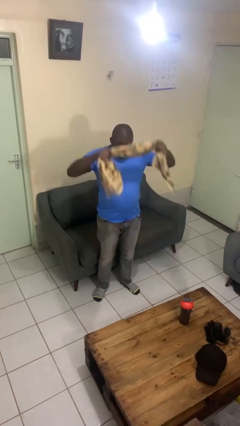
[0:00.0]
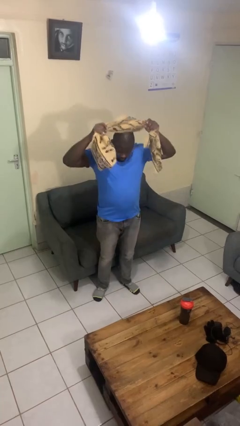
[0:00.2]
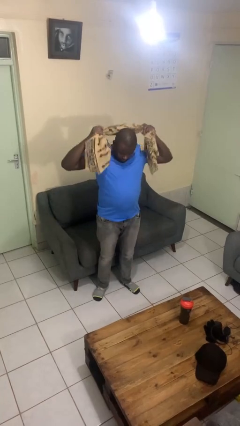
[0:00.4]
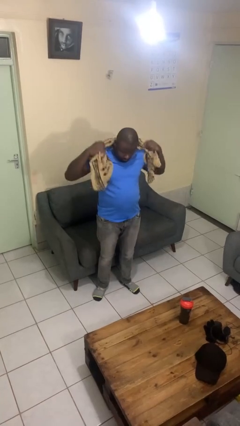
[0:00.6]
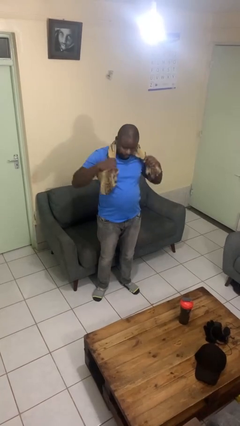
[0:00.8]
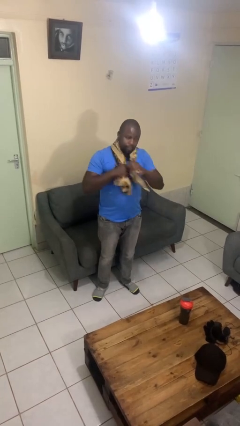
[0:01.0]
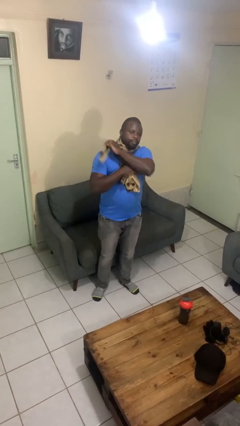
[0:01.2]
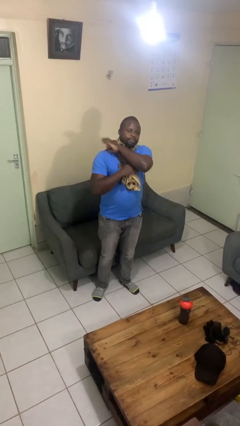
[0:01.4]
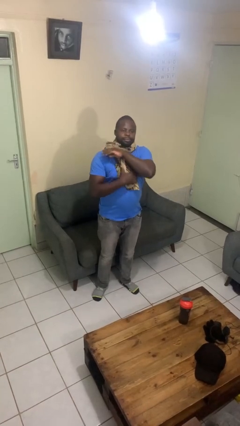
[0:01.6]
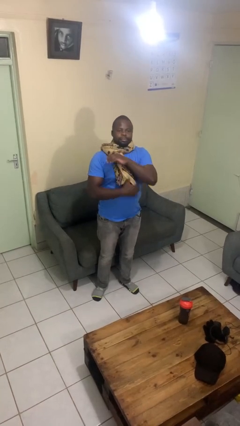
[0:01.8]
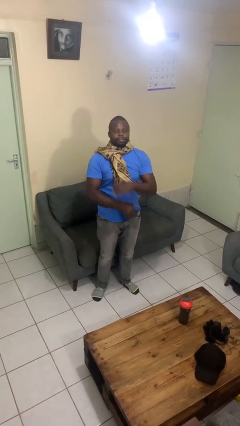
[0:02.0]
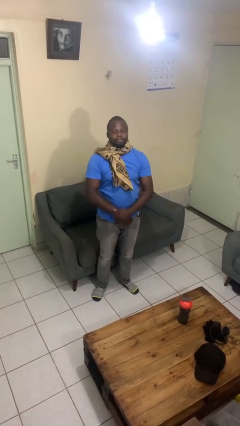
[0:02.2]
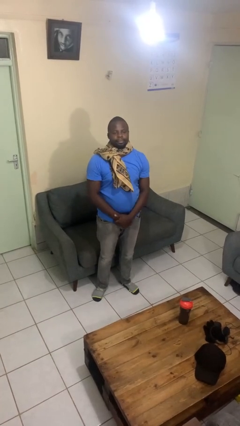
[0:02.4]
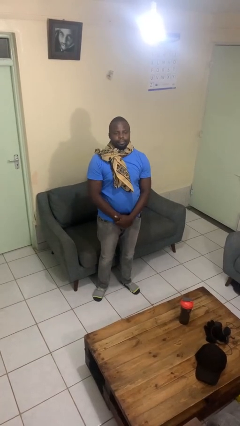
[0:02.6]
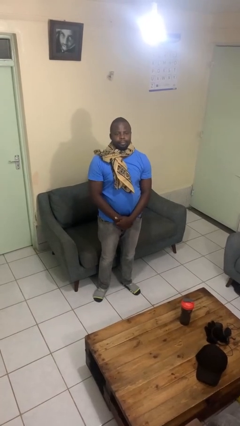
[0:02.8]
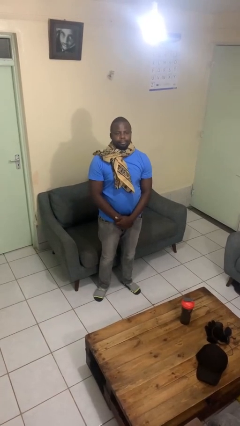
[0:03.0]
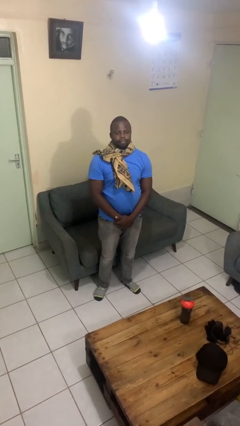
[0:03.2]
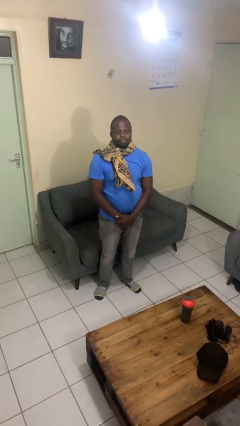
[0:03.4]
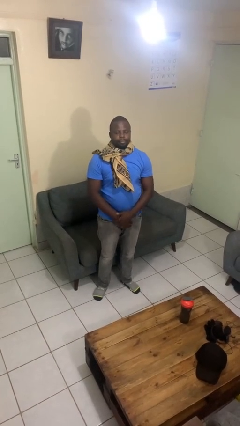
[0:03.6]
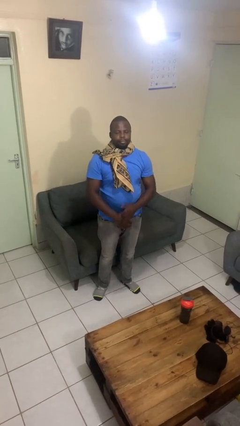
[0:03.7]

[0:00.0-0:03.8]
person puts on scarf

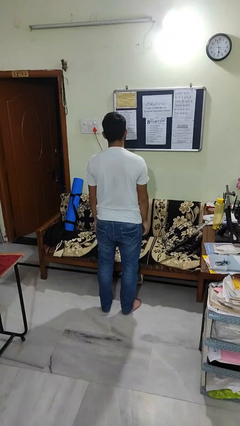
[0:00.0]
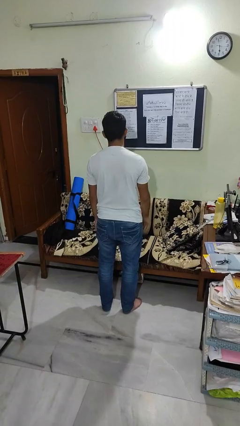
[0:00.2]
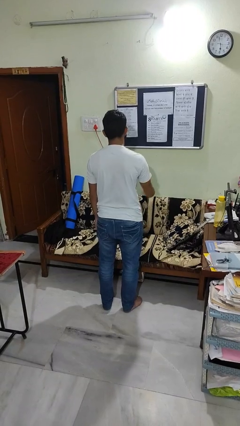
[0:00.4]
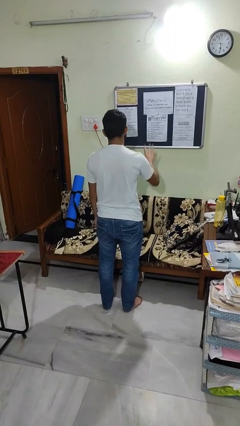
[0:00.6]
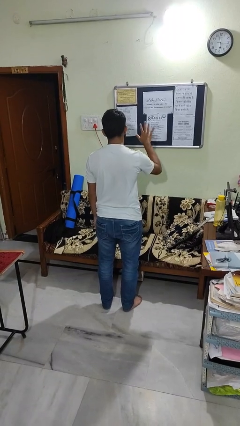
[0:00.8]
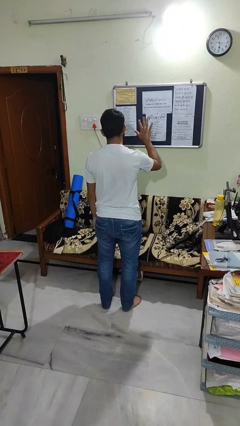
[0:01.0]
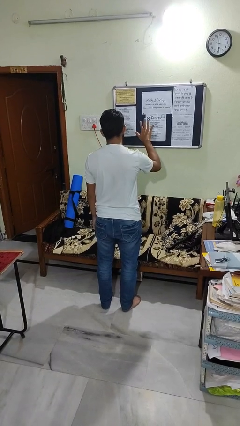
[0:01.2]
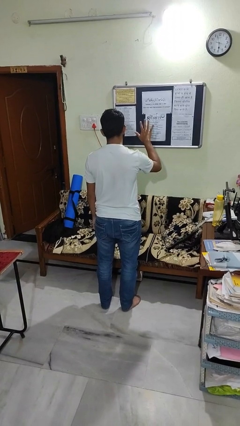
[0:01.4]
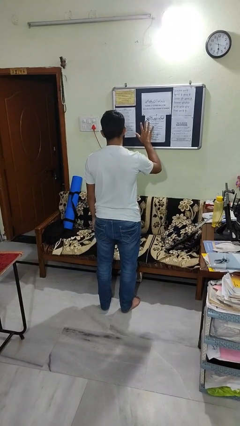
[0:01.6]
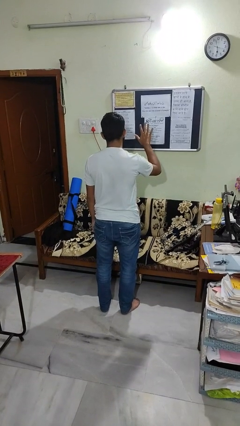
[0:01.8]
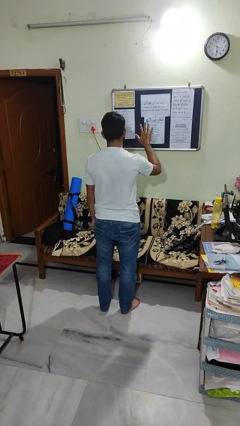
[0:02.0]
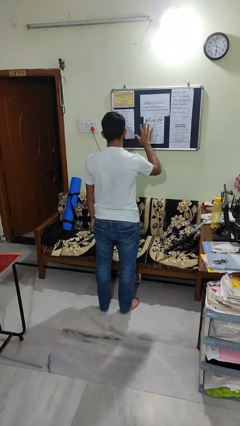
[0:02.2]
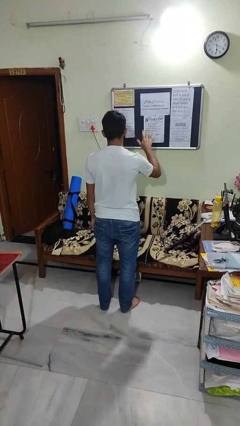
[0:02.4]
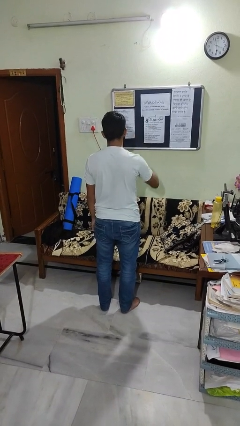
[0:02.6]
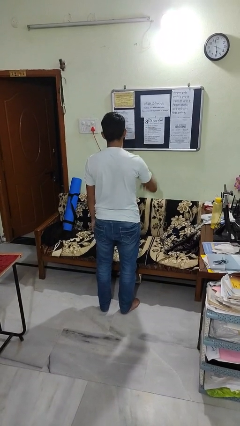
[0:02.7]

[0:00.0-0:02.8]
person gestures number five

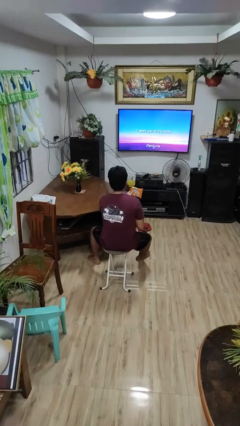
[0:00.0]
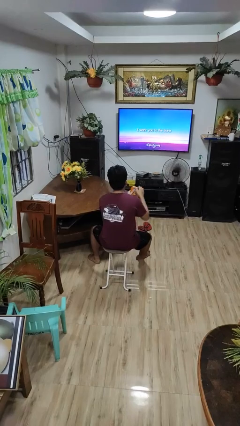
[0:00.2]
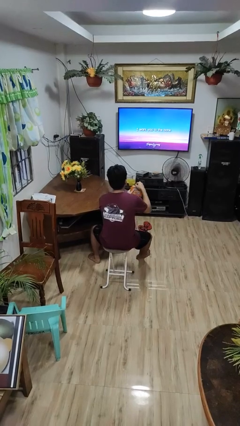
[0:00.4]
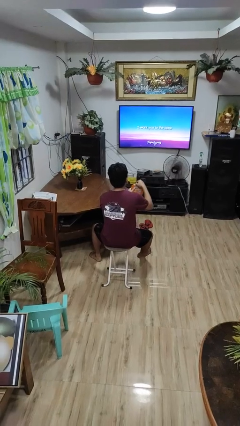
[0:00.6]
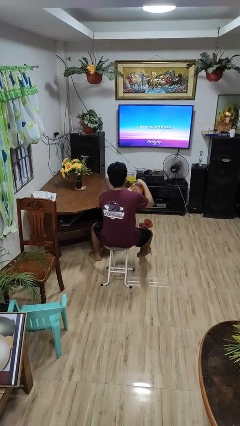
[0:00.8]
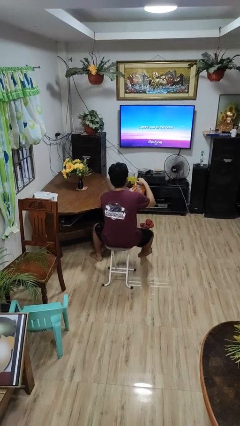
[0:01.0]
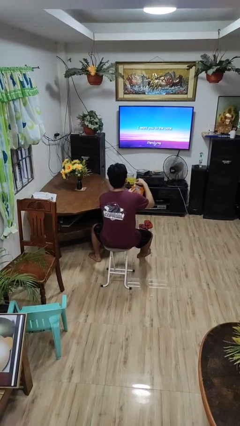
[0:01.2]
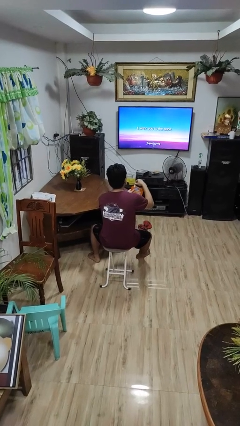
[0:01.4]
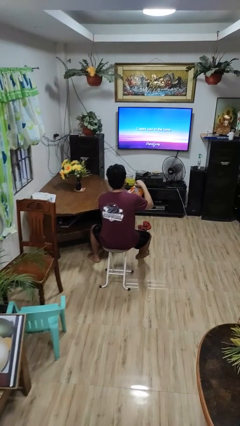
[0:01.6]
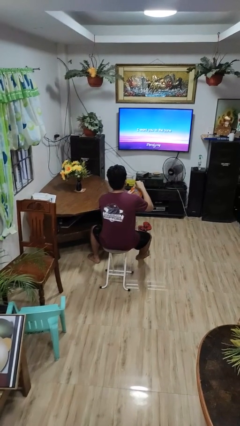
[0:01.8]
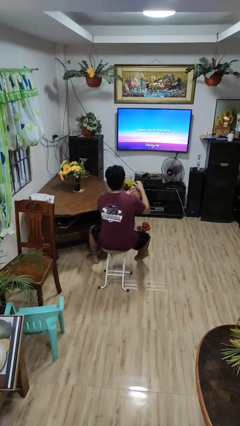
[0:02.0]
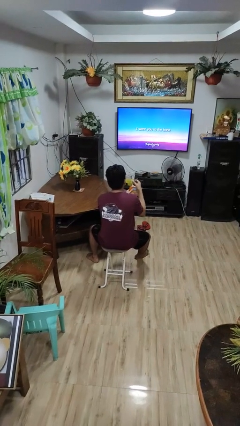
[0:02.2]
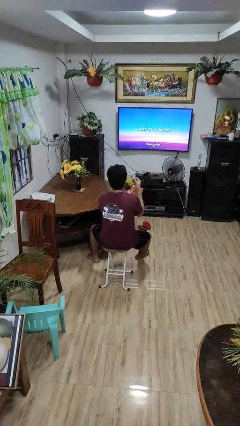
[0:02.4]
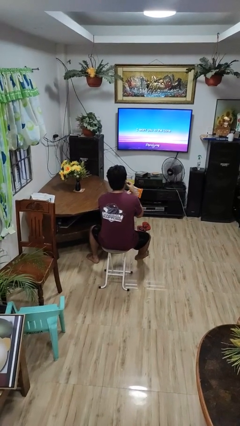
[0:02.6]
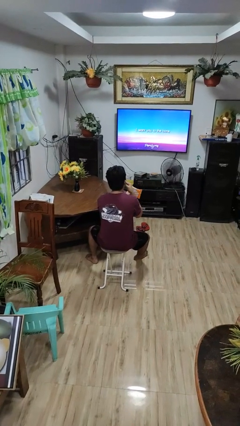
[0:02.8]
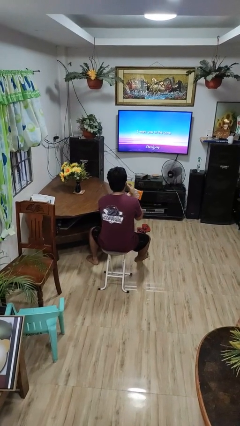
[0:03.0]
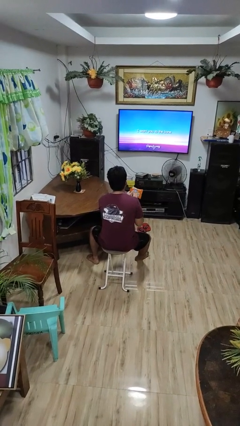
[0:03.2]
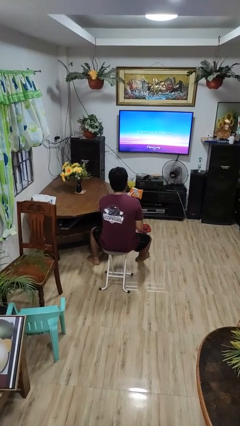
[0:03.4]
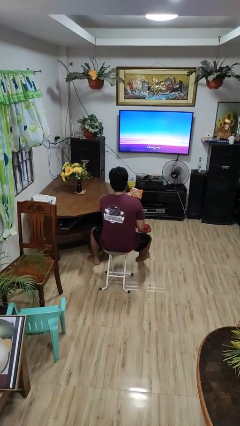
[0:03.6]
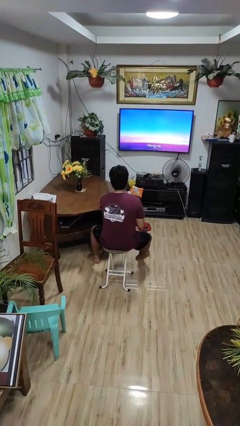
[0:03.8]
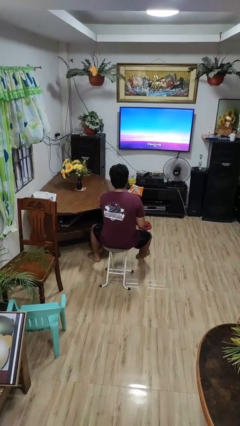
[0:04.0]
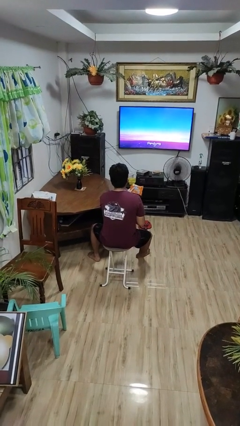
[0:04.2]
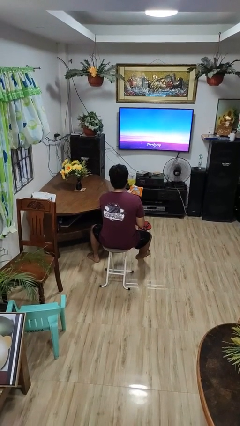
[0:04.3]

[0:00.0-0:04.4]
person eats snack from bag

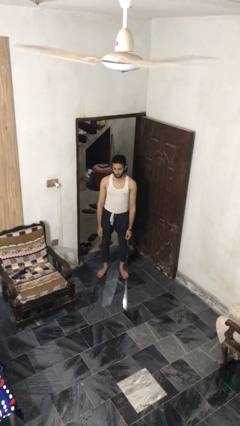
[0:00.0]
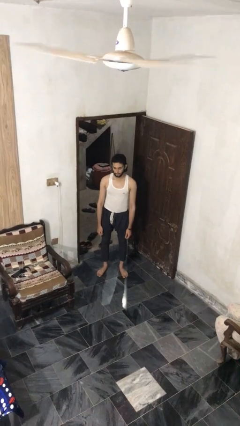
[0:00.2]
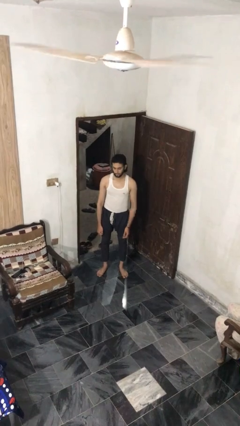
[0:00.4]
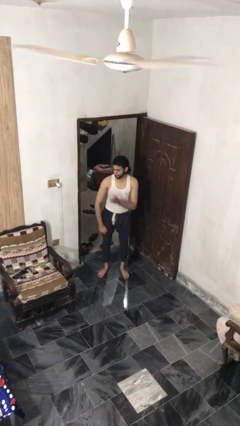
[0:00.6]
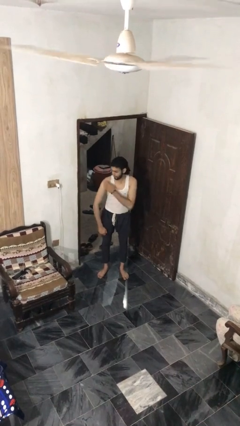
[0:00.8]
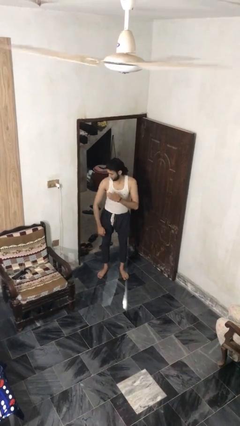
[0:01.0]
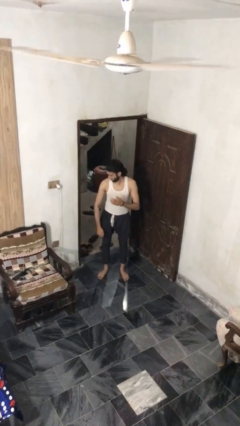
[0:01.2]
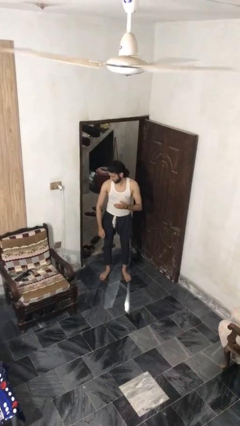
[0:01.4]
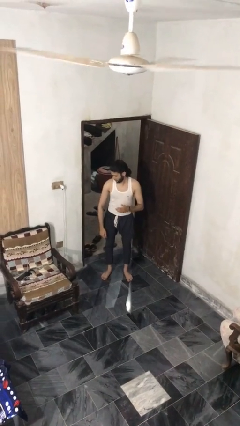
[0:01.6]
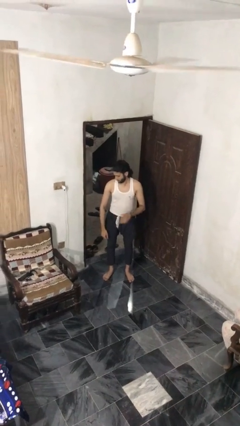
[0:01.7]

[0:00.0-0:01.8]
person swats bug

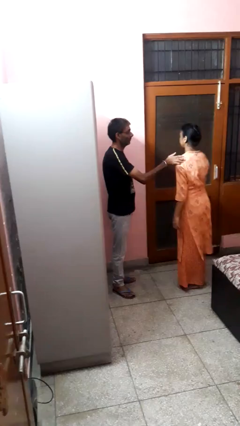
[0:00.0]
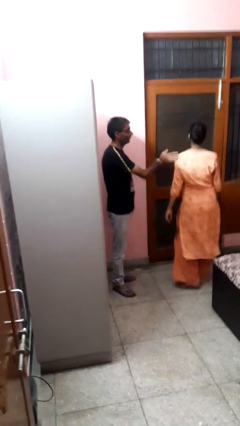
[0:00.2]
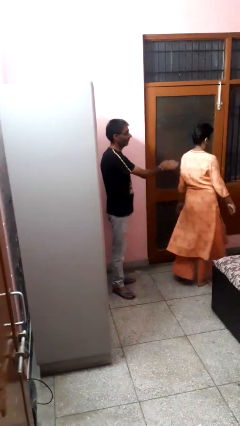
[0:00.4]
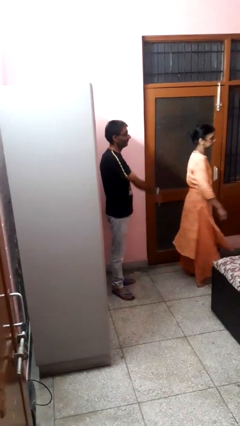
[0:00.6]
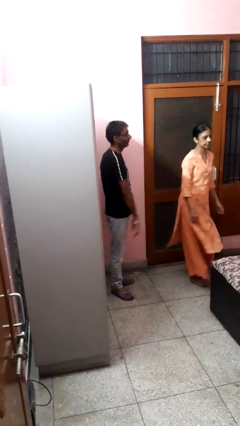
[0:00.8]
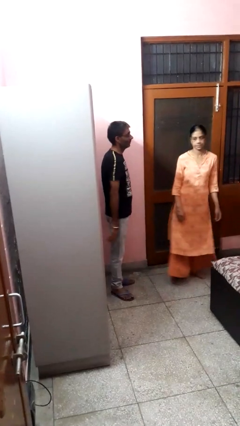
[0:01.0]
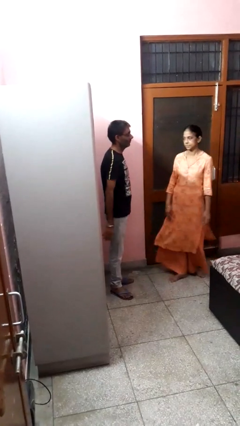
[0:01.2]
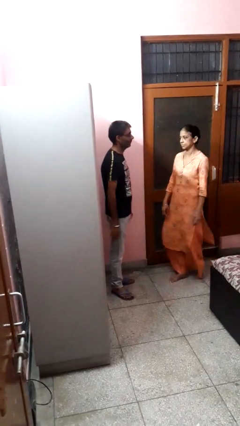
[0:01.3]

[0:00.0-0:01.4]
person spins person around

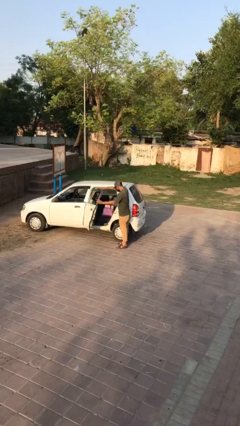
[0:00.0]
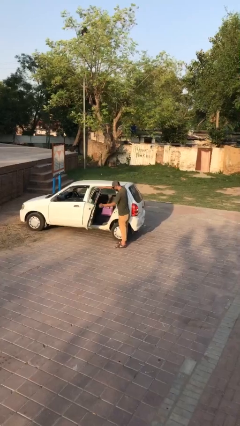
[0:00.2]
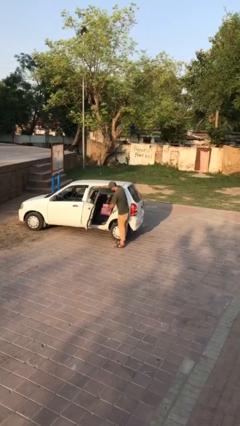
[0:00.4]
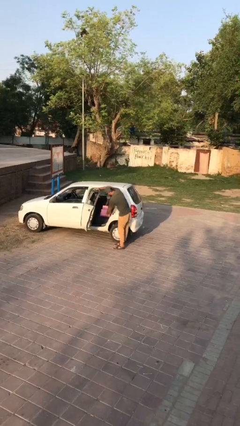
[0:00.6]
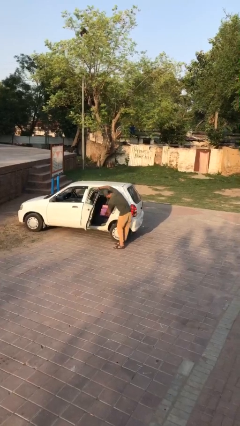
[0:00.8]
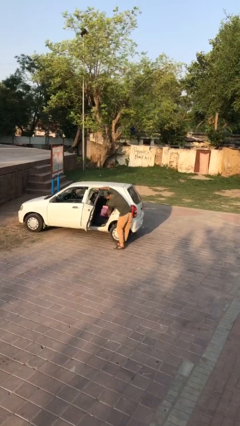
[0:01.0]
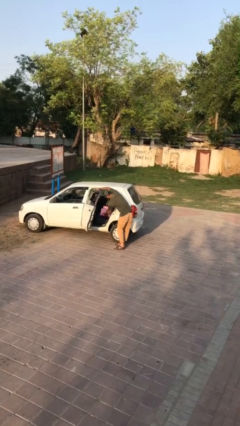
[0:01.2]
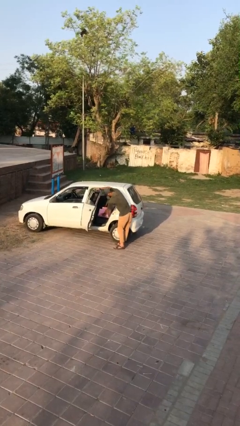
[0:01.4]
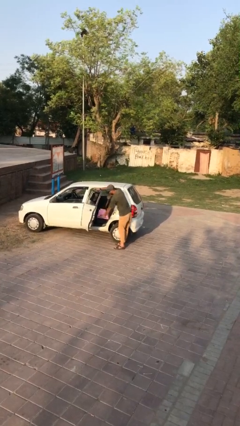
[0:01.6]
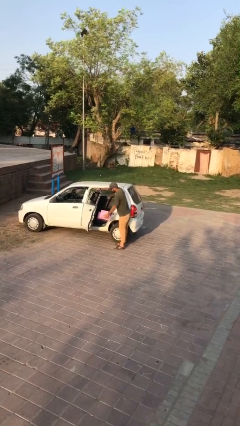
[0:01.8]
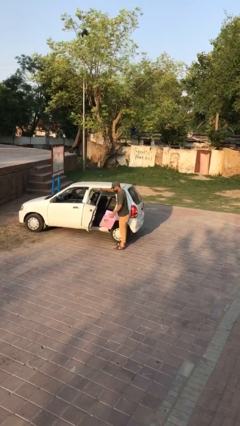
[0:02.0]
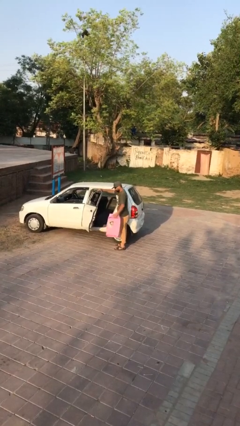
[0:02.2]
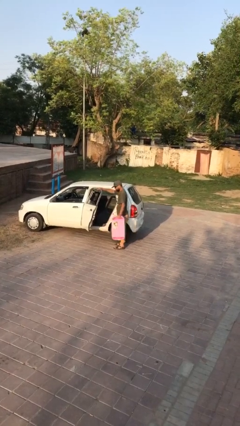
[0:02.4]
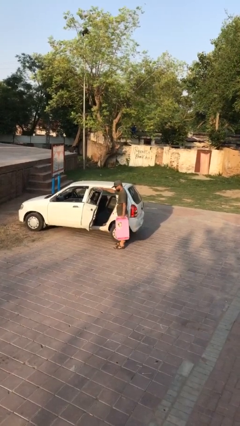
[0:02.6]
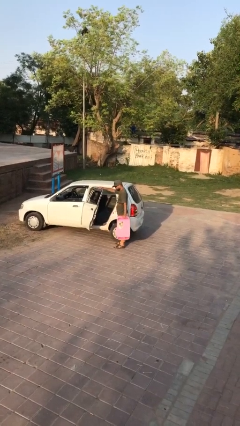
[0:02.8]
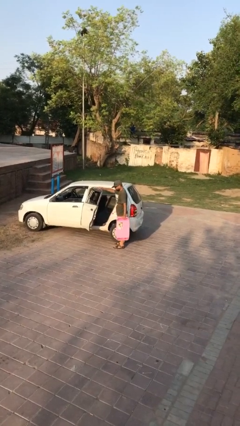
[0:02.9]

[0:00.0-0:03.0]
person unloads car

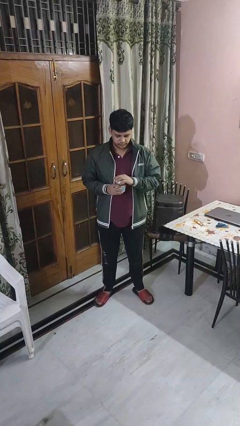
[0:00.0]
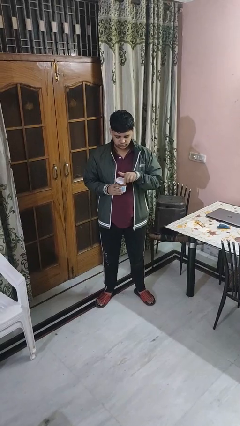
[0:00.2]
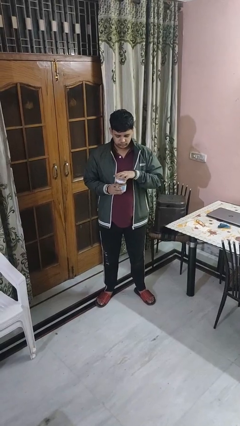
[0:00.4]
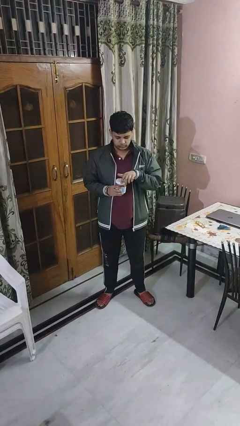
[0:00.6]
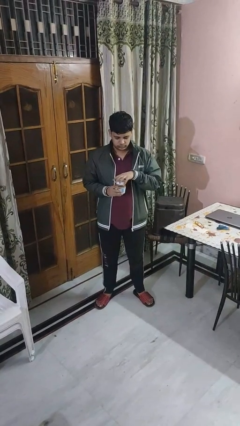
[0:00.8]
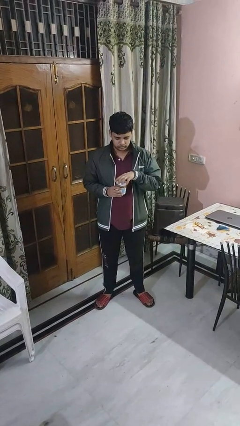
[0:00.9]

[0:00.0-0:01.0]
person opens jar
